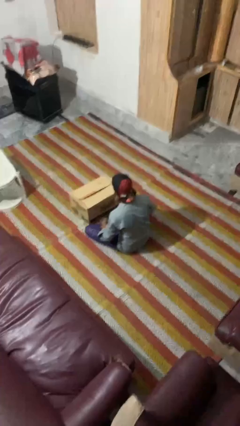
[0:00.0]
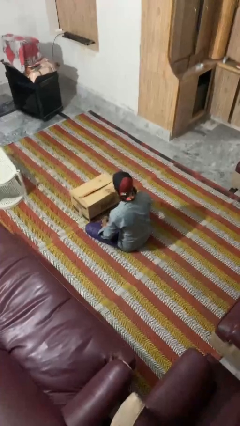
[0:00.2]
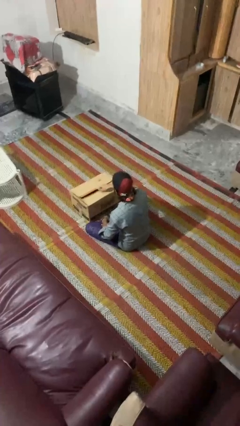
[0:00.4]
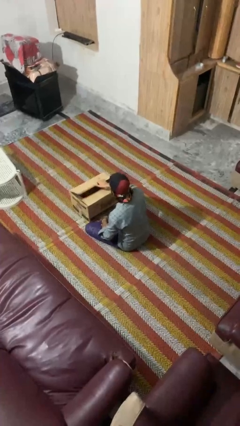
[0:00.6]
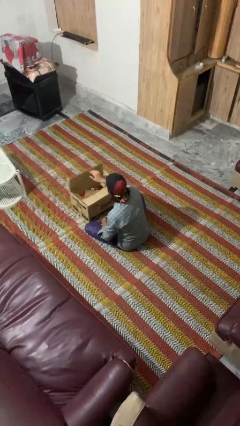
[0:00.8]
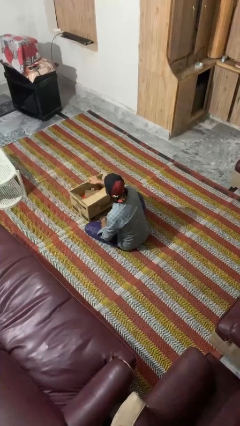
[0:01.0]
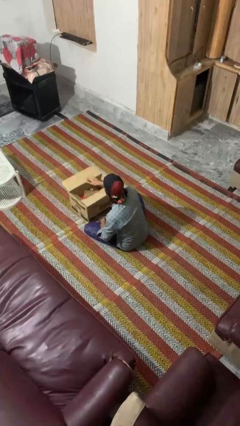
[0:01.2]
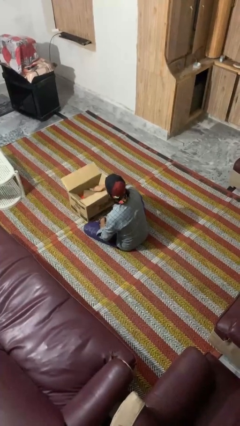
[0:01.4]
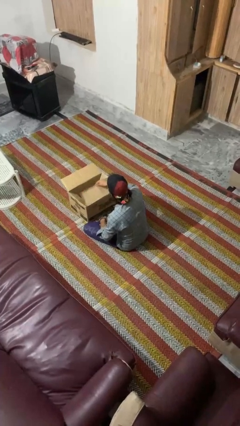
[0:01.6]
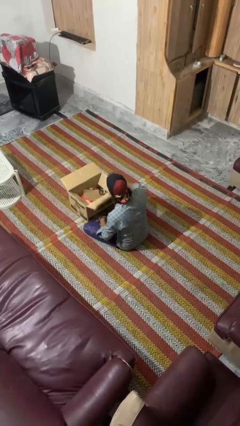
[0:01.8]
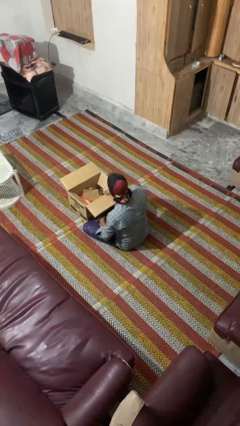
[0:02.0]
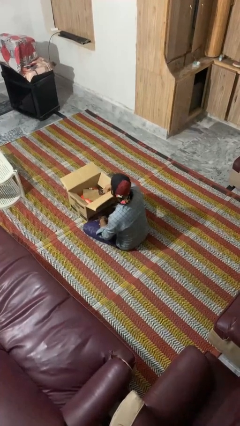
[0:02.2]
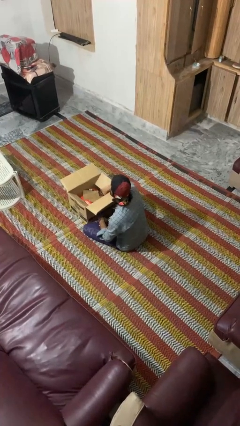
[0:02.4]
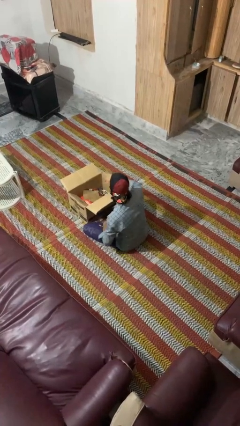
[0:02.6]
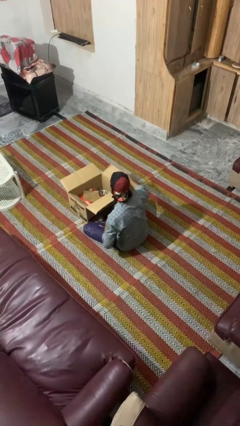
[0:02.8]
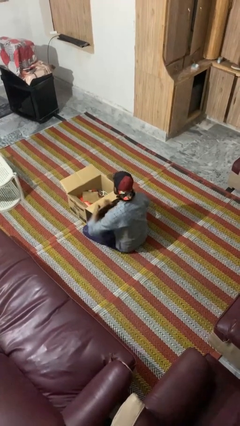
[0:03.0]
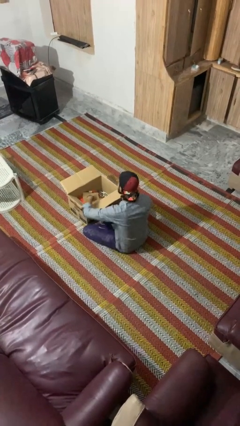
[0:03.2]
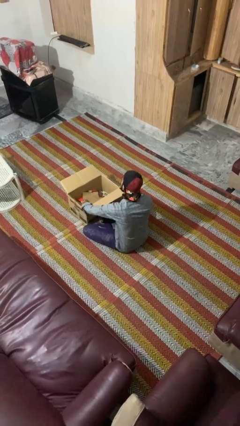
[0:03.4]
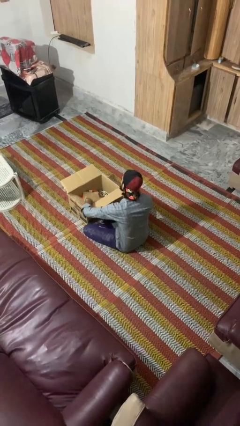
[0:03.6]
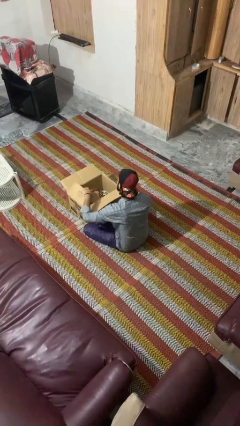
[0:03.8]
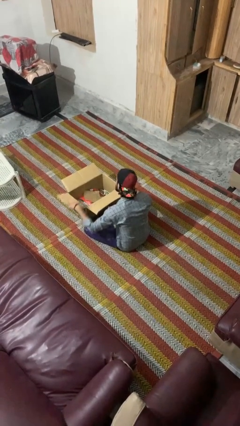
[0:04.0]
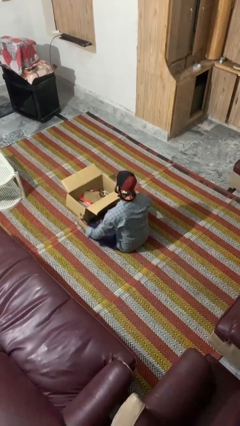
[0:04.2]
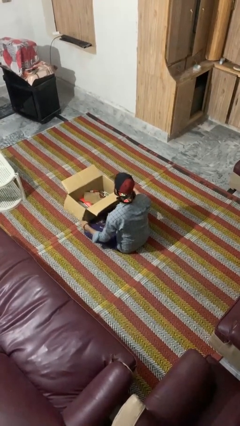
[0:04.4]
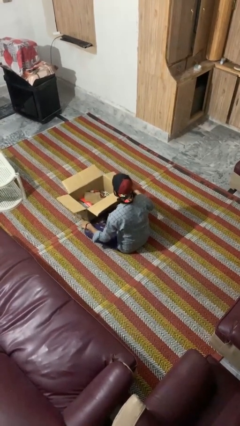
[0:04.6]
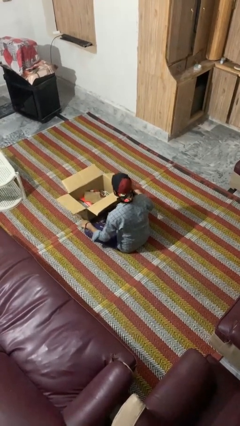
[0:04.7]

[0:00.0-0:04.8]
person opens box

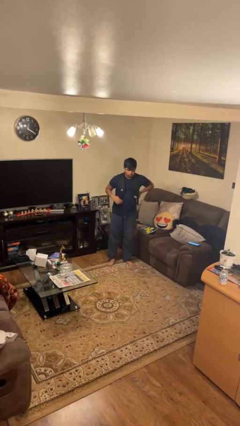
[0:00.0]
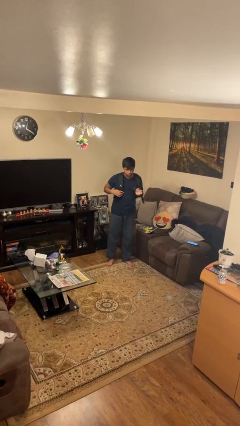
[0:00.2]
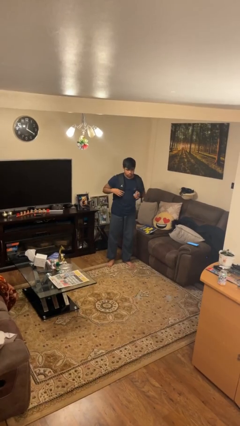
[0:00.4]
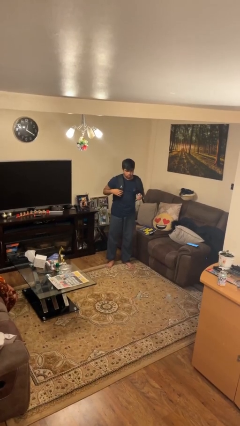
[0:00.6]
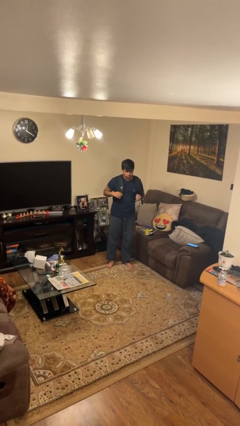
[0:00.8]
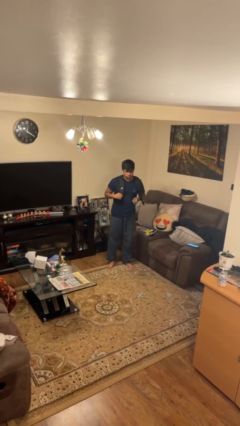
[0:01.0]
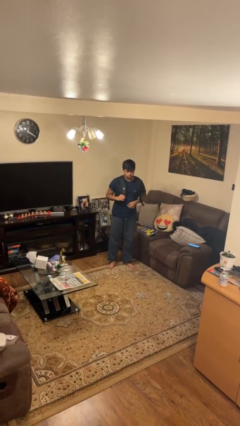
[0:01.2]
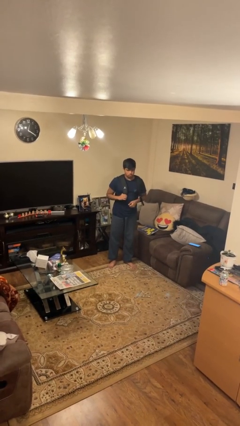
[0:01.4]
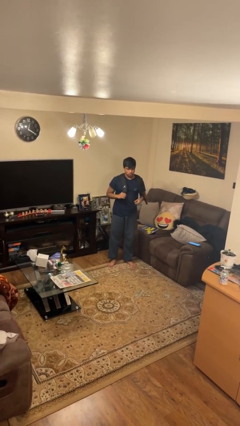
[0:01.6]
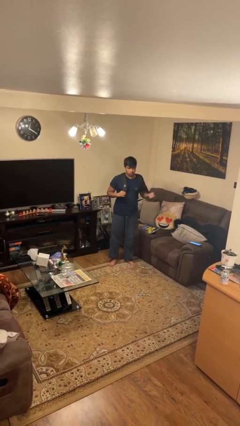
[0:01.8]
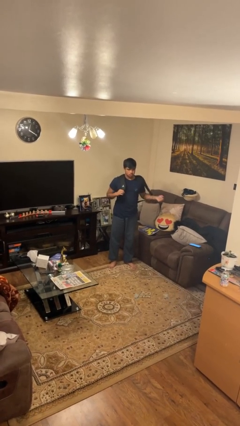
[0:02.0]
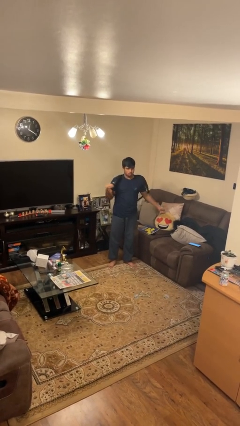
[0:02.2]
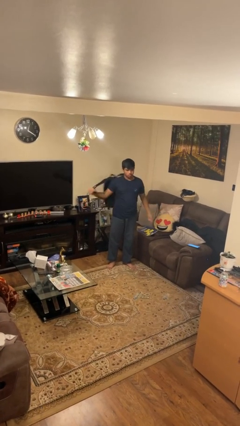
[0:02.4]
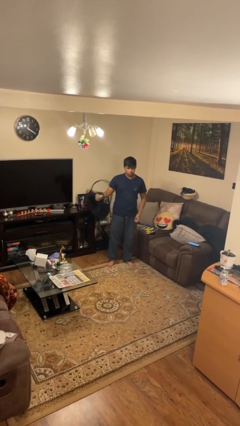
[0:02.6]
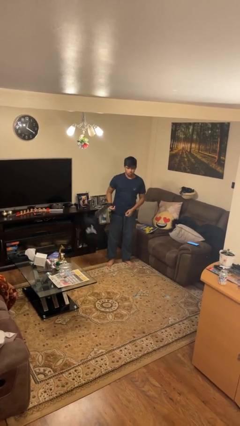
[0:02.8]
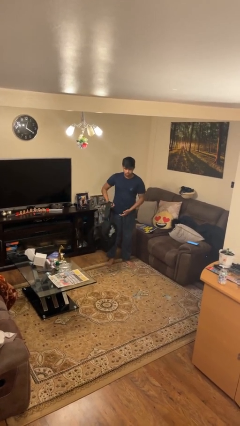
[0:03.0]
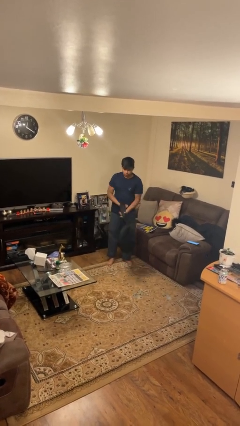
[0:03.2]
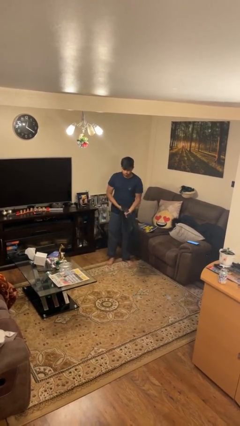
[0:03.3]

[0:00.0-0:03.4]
person takes off backpack

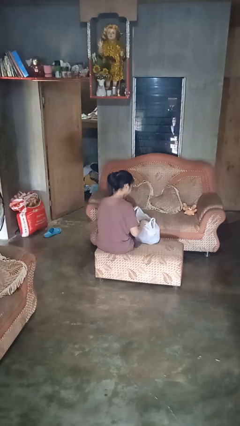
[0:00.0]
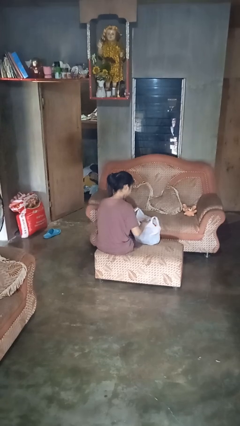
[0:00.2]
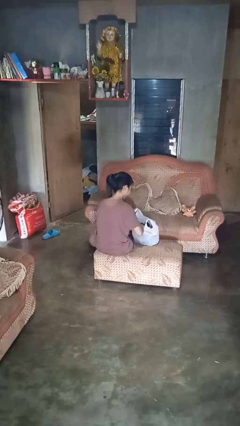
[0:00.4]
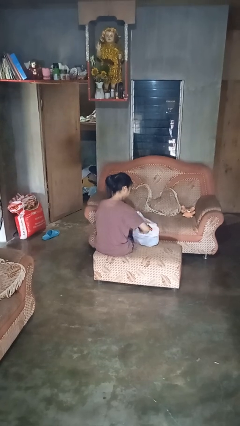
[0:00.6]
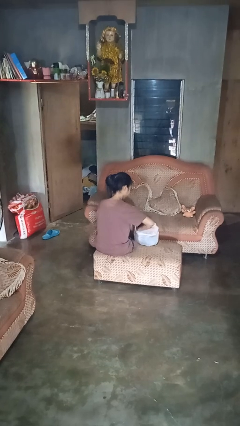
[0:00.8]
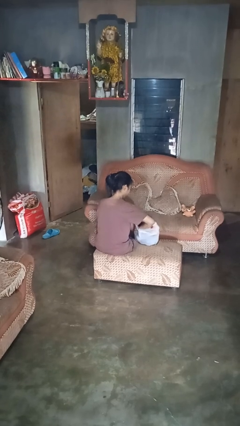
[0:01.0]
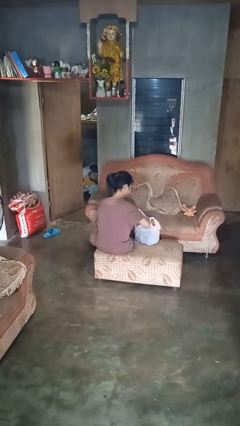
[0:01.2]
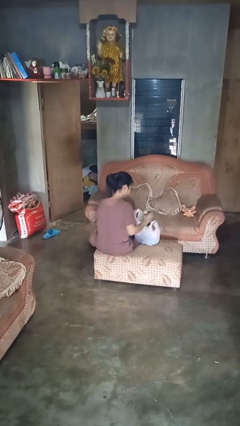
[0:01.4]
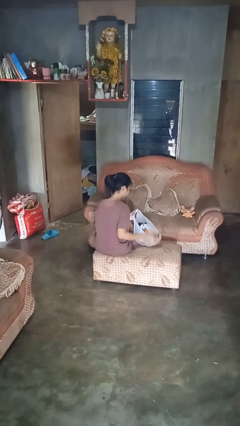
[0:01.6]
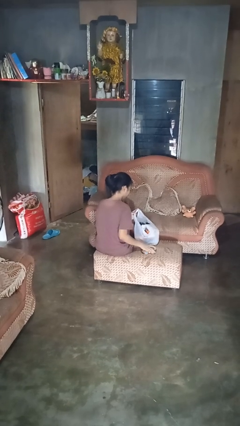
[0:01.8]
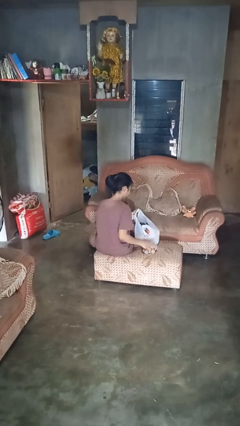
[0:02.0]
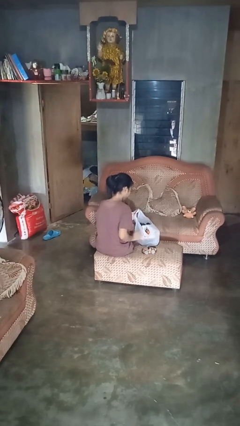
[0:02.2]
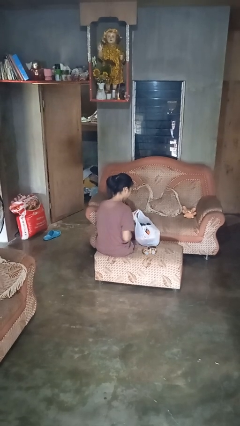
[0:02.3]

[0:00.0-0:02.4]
person takes object from bag

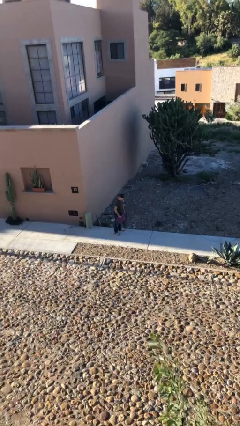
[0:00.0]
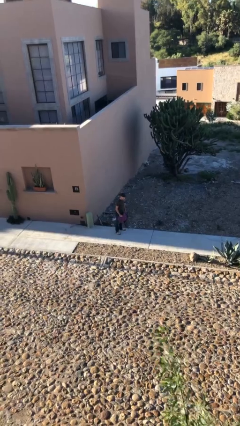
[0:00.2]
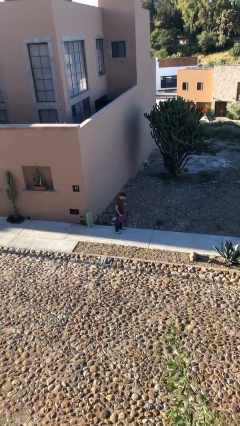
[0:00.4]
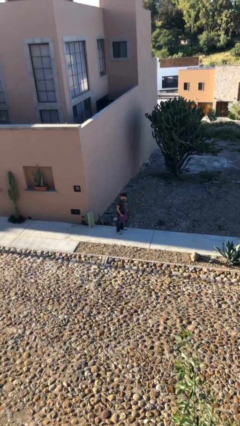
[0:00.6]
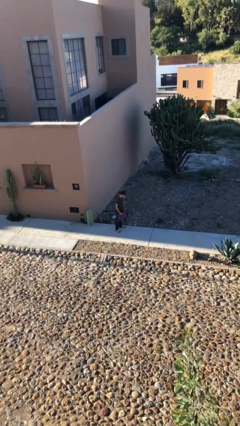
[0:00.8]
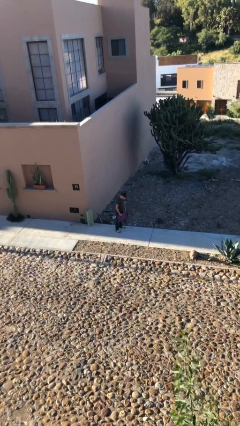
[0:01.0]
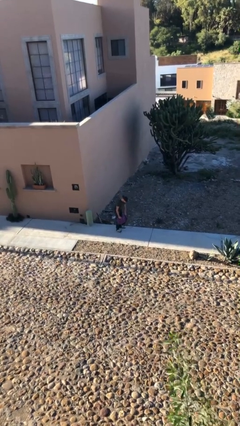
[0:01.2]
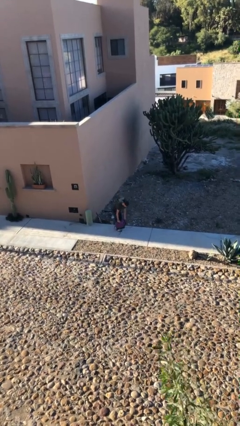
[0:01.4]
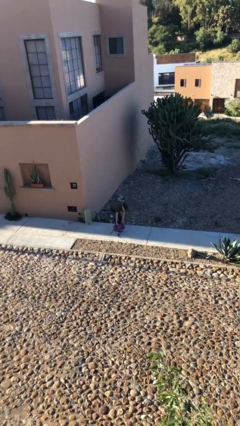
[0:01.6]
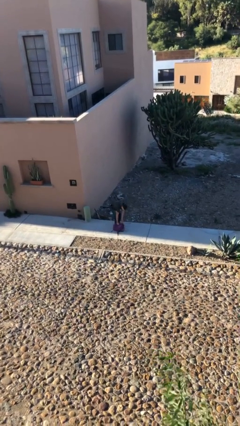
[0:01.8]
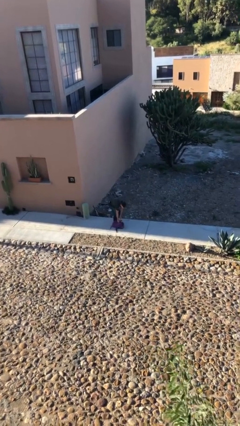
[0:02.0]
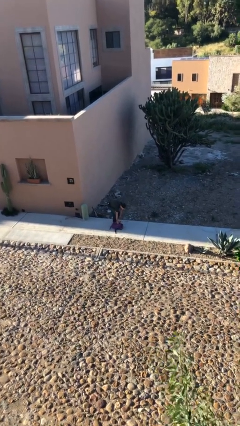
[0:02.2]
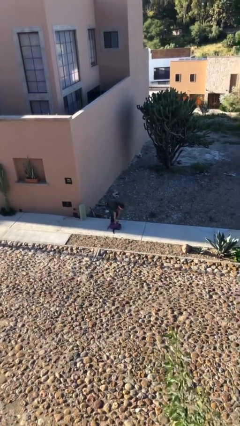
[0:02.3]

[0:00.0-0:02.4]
person puts down object on floor

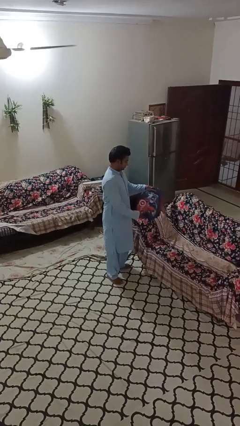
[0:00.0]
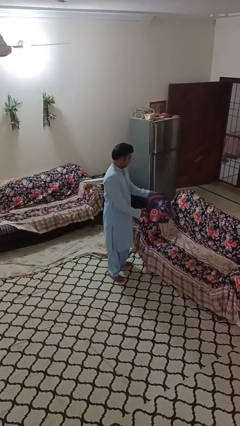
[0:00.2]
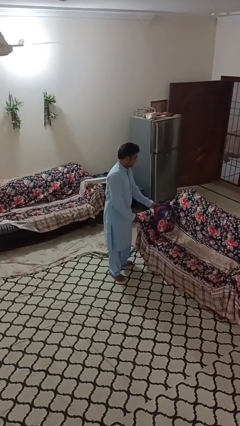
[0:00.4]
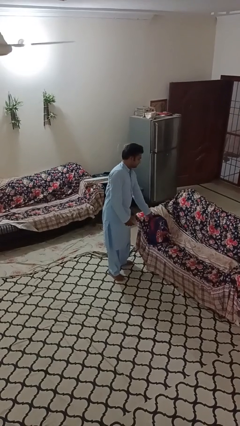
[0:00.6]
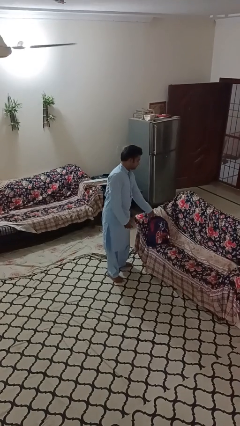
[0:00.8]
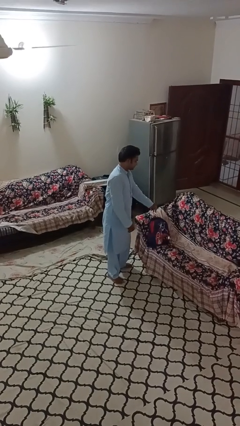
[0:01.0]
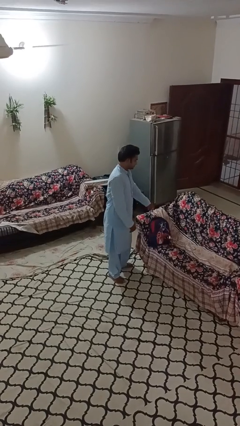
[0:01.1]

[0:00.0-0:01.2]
person puts down object on couch

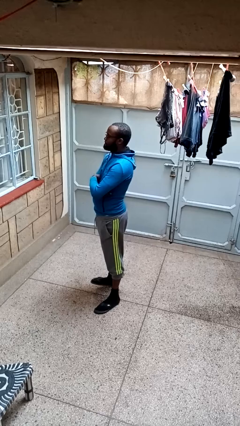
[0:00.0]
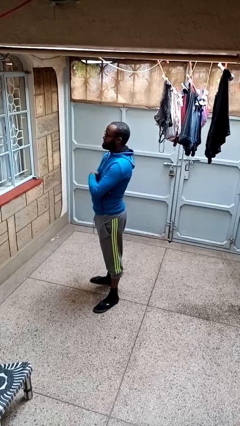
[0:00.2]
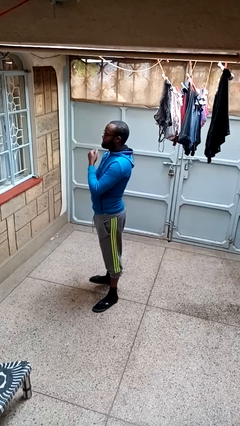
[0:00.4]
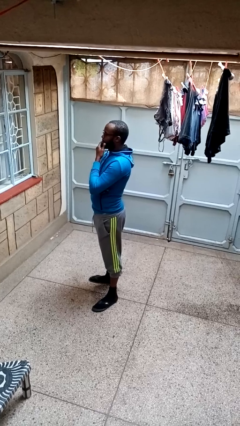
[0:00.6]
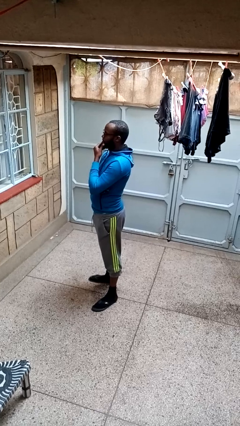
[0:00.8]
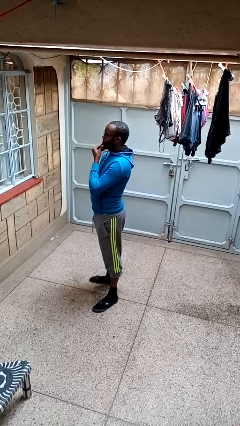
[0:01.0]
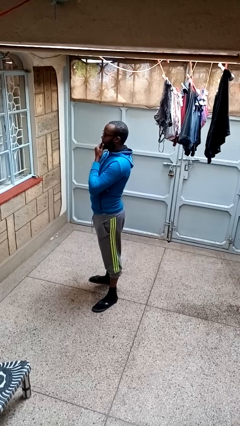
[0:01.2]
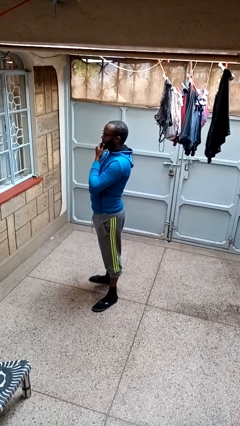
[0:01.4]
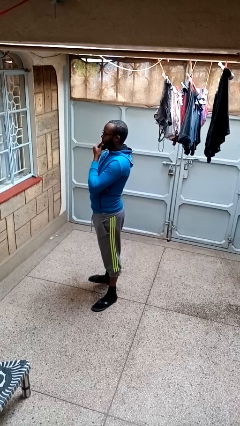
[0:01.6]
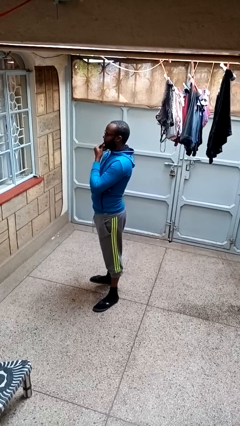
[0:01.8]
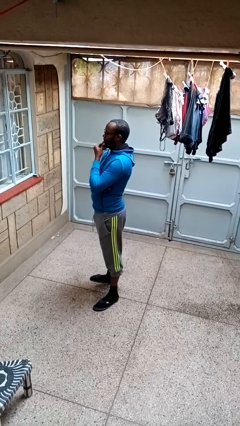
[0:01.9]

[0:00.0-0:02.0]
person strokes chin

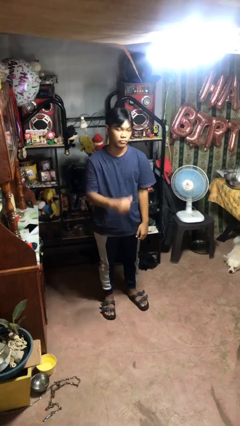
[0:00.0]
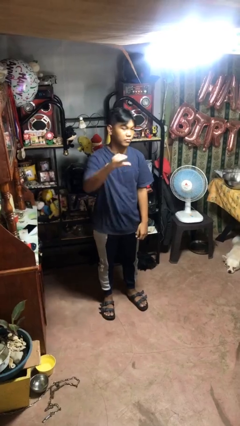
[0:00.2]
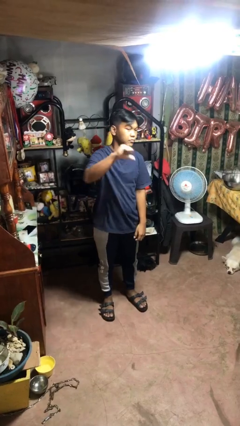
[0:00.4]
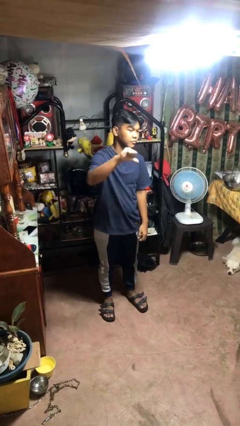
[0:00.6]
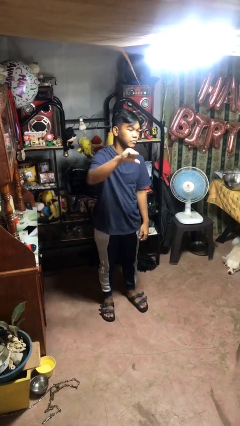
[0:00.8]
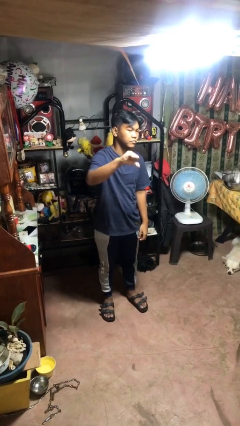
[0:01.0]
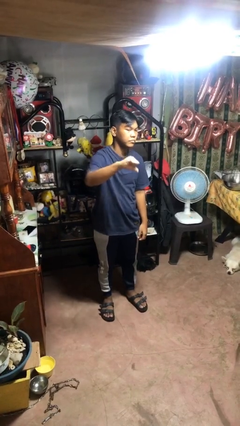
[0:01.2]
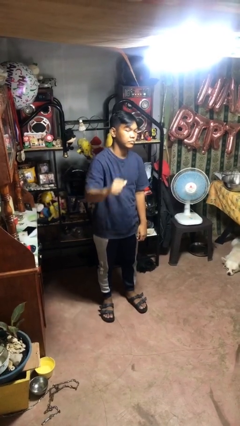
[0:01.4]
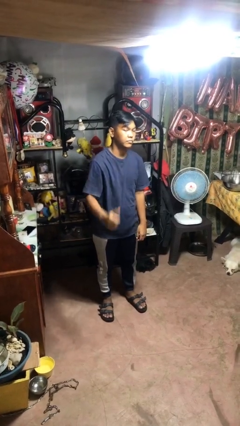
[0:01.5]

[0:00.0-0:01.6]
person gestures thumbs down
